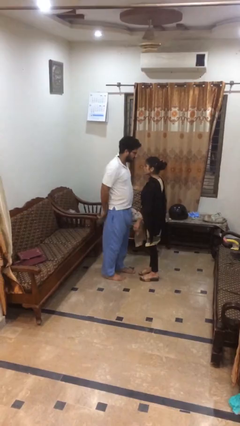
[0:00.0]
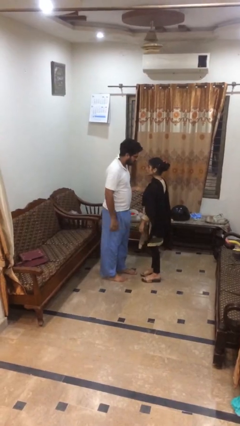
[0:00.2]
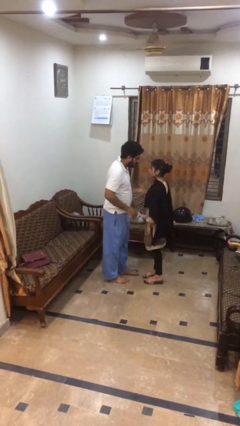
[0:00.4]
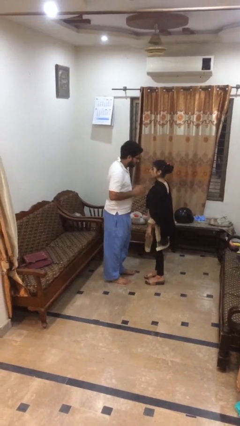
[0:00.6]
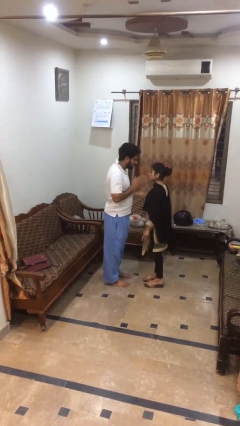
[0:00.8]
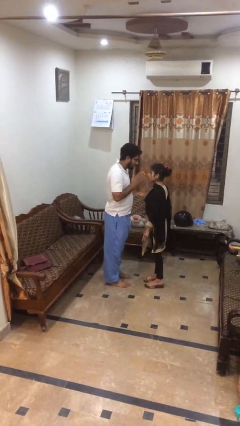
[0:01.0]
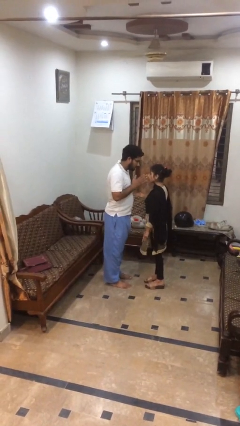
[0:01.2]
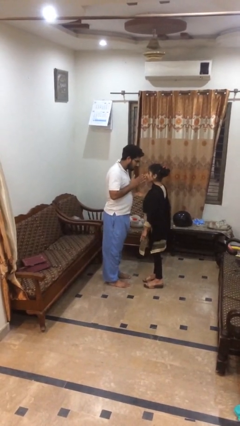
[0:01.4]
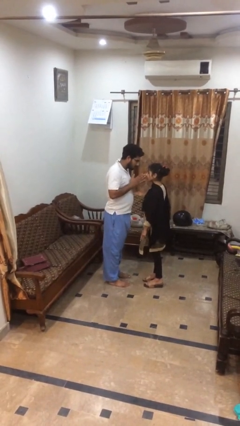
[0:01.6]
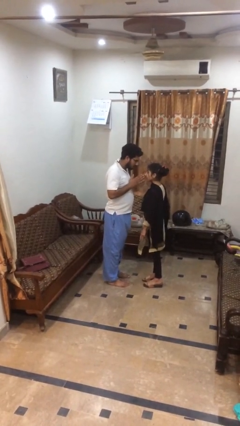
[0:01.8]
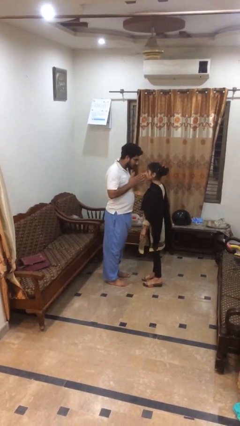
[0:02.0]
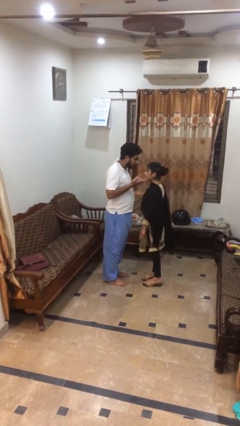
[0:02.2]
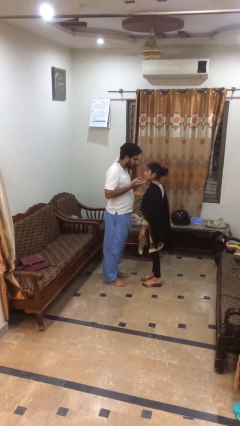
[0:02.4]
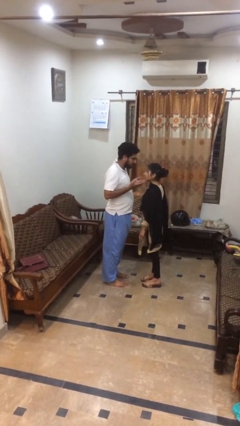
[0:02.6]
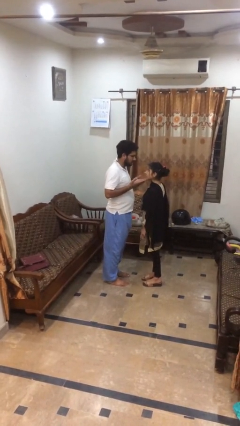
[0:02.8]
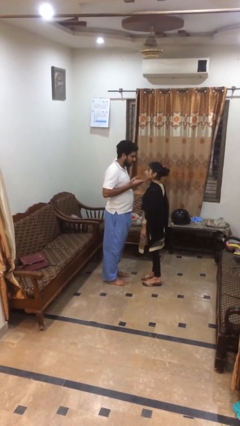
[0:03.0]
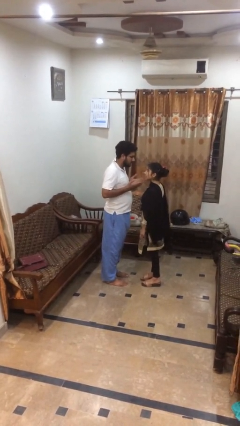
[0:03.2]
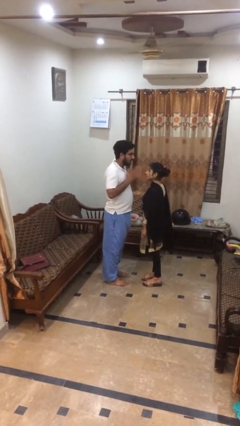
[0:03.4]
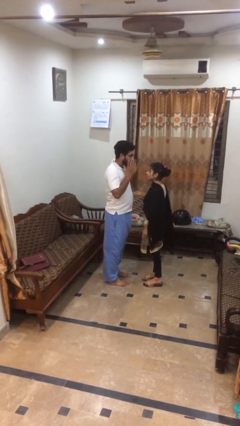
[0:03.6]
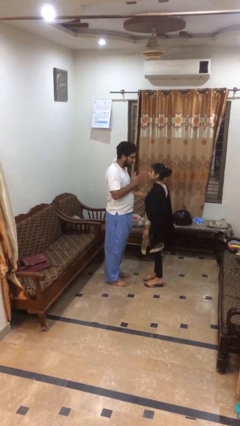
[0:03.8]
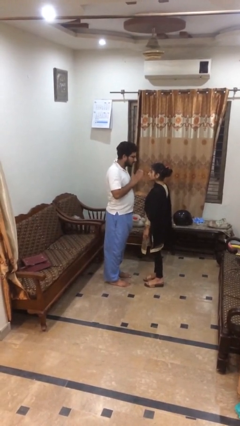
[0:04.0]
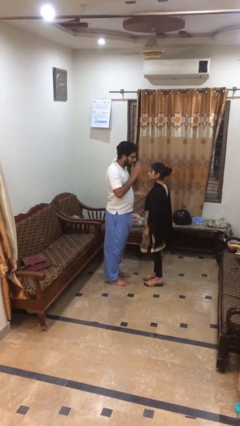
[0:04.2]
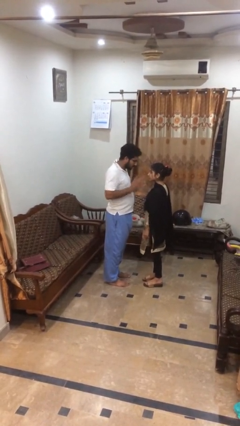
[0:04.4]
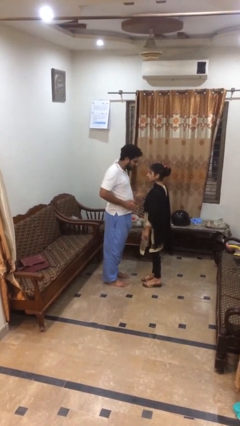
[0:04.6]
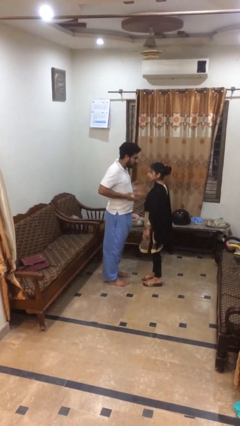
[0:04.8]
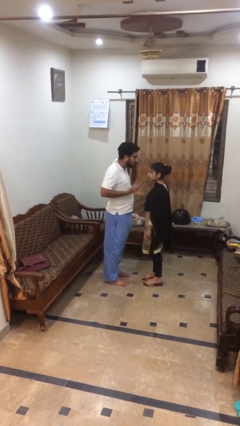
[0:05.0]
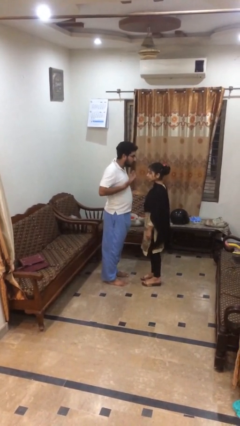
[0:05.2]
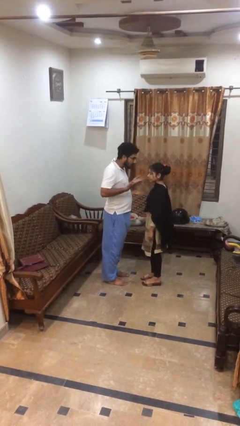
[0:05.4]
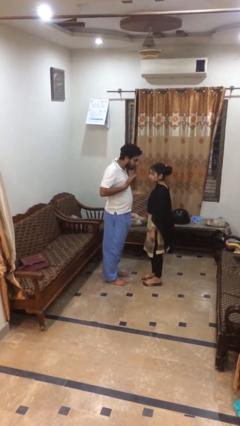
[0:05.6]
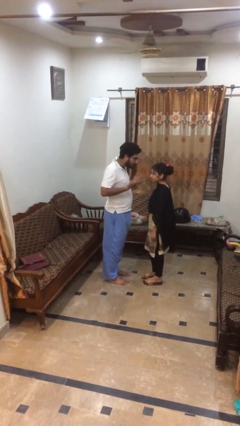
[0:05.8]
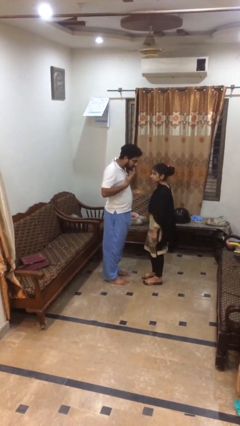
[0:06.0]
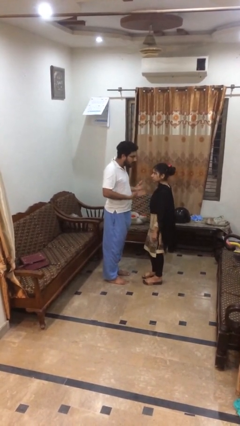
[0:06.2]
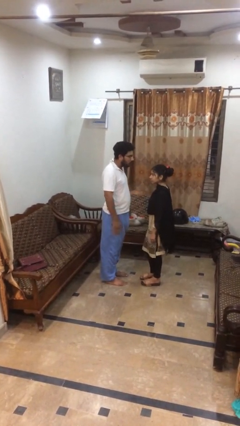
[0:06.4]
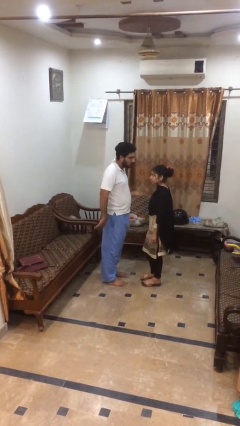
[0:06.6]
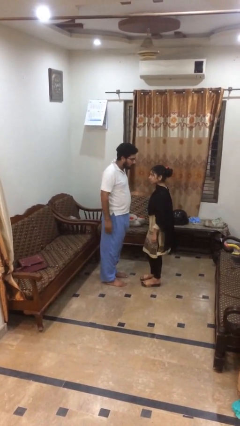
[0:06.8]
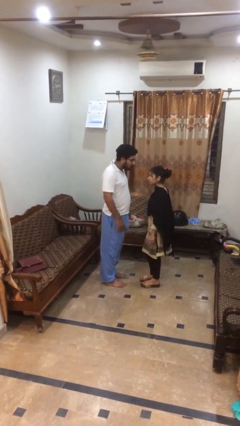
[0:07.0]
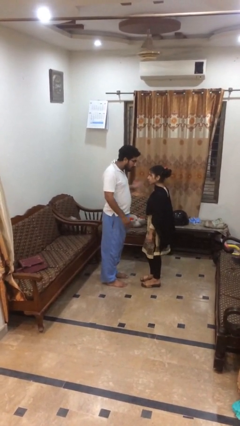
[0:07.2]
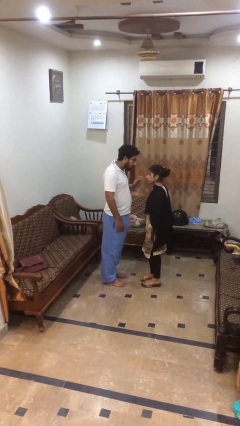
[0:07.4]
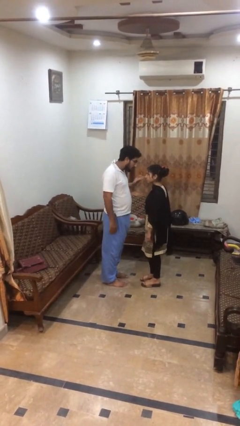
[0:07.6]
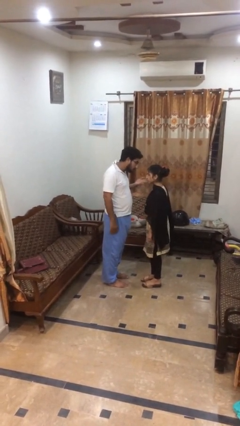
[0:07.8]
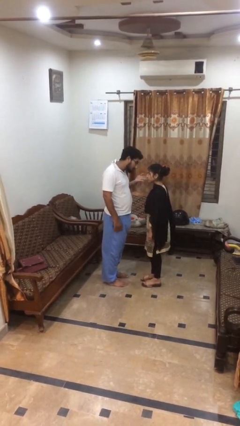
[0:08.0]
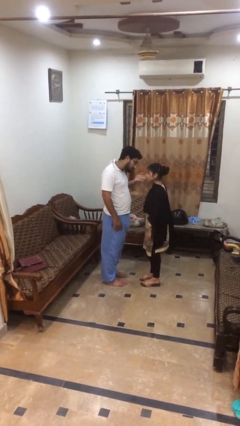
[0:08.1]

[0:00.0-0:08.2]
person talks to person

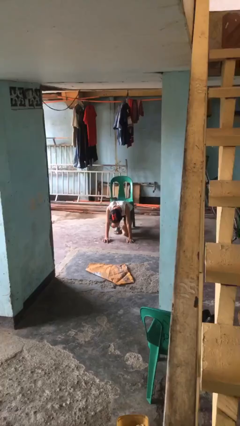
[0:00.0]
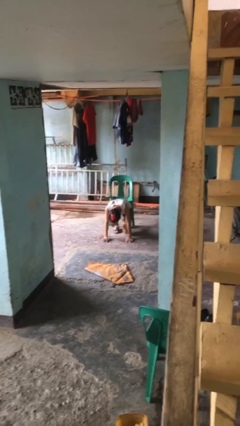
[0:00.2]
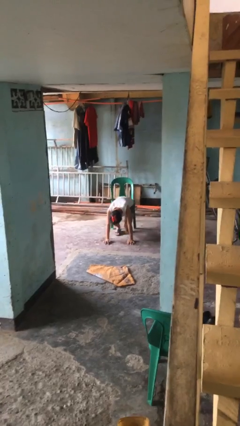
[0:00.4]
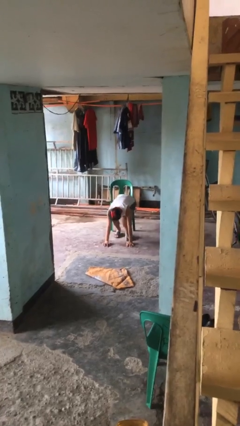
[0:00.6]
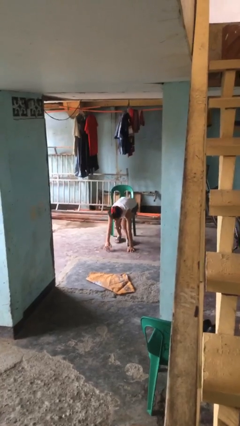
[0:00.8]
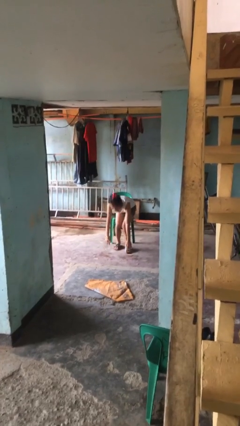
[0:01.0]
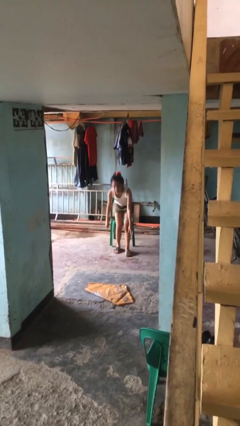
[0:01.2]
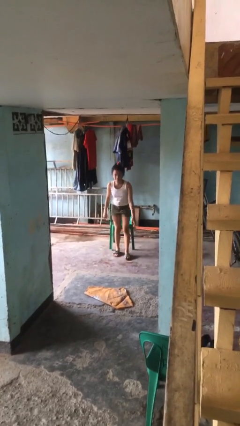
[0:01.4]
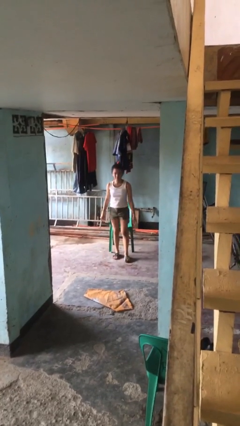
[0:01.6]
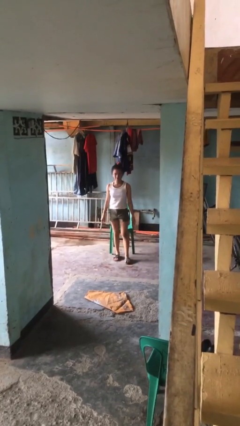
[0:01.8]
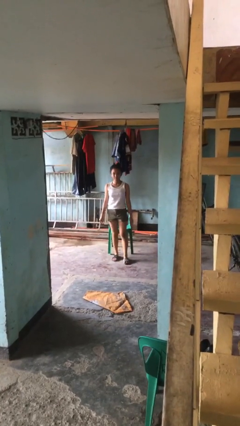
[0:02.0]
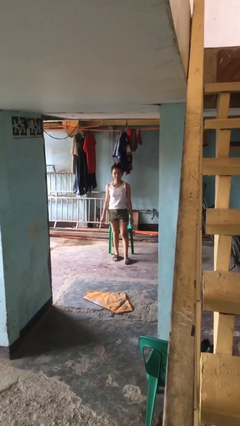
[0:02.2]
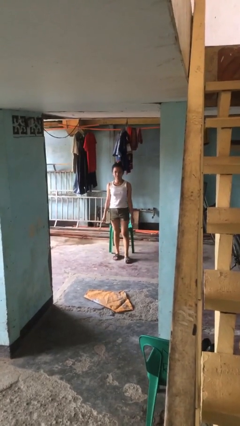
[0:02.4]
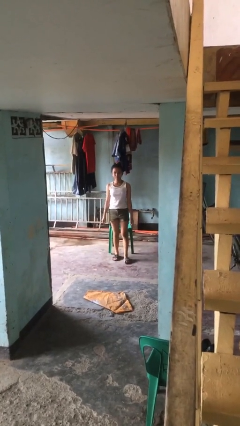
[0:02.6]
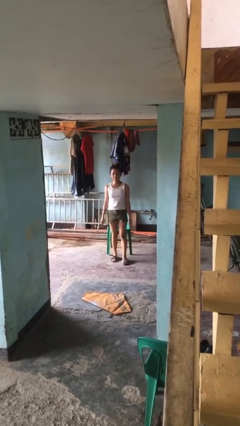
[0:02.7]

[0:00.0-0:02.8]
person stands up from floor

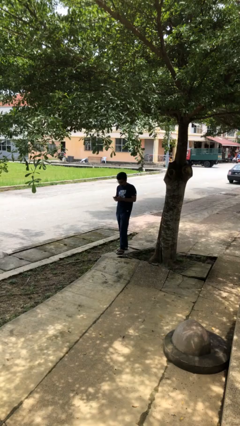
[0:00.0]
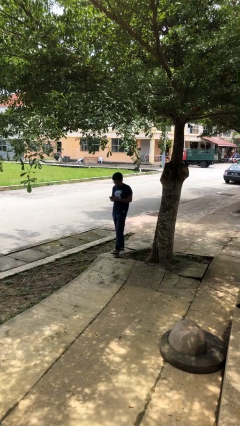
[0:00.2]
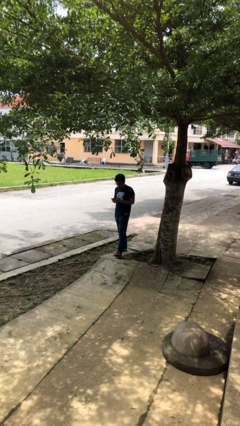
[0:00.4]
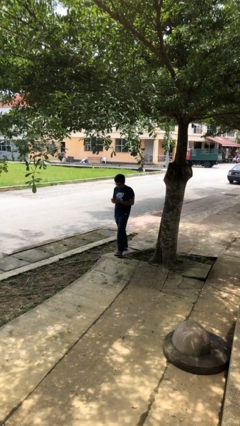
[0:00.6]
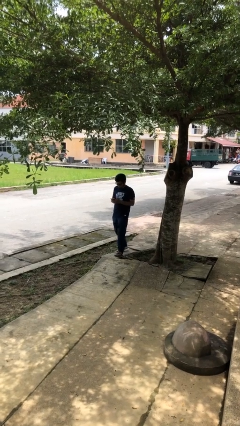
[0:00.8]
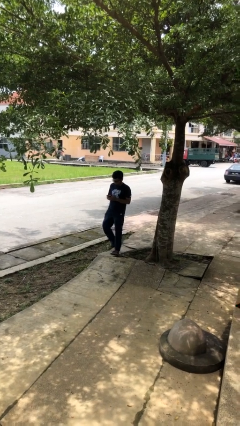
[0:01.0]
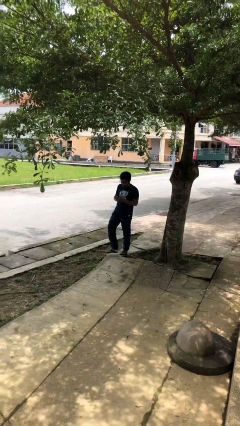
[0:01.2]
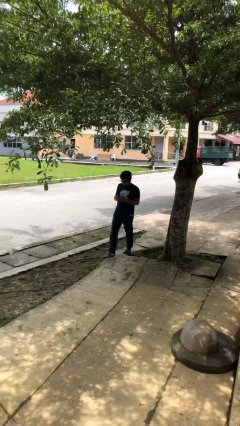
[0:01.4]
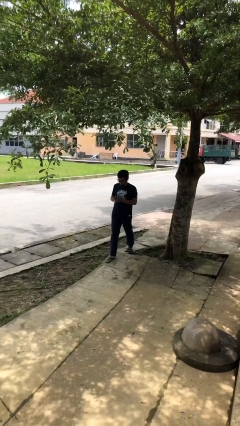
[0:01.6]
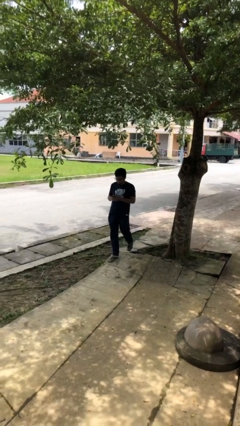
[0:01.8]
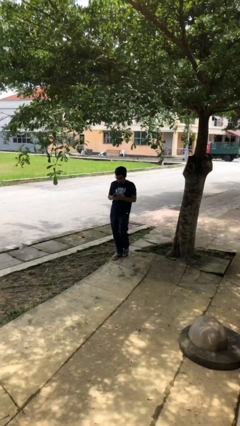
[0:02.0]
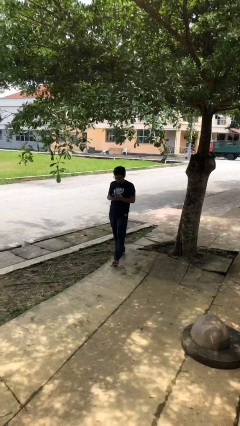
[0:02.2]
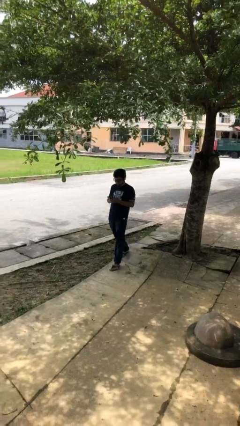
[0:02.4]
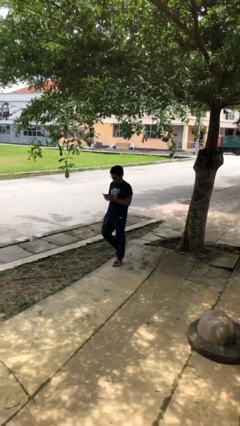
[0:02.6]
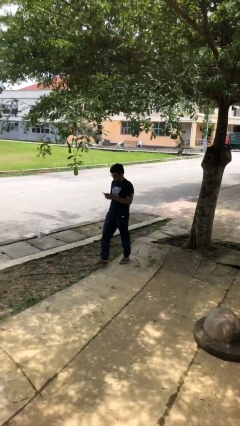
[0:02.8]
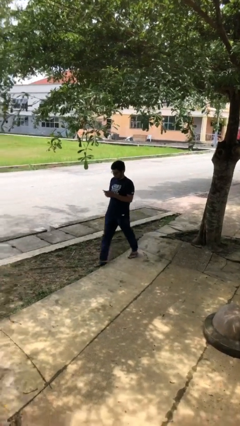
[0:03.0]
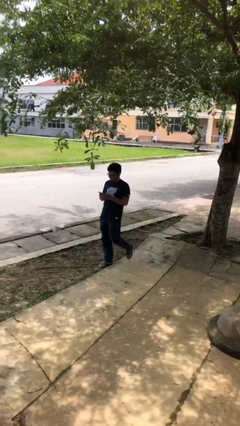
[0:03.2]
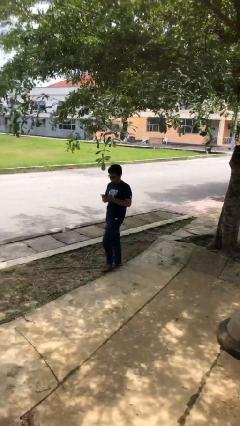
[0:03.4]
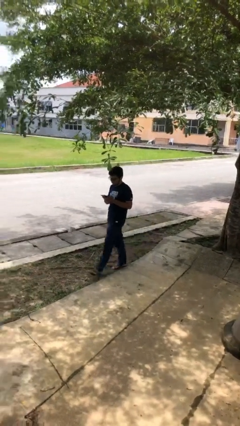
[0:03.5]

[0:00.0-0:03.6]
person texts on phone

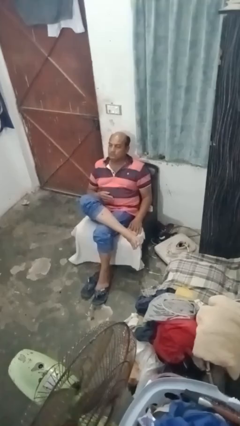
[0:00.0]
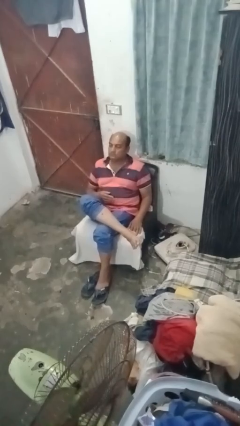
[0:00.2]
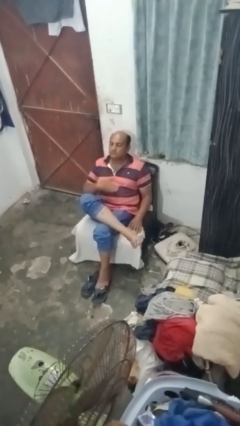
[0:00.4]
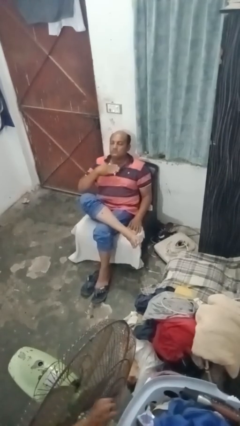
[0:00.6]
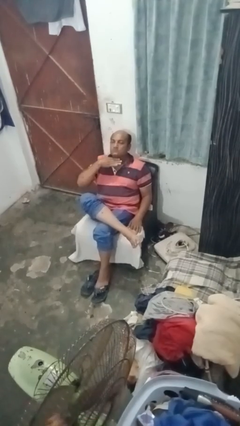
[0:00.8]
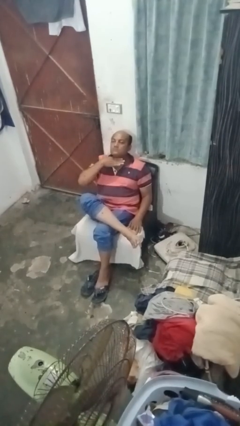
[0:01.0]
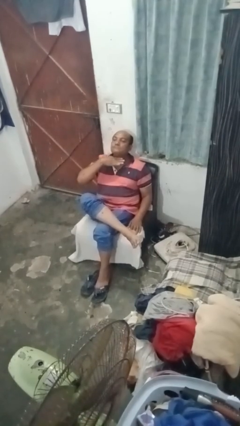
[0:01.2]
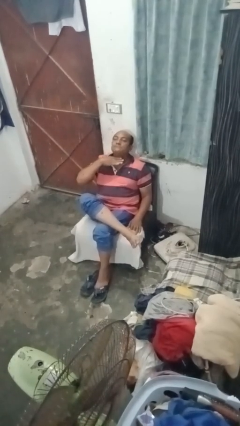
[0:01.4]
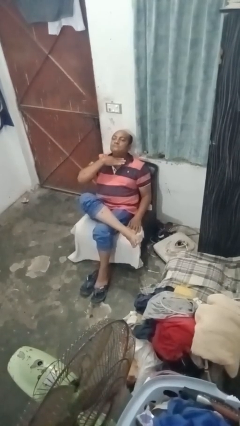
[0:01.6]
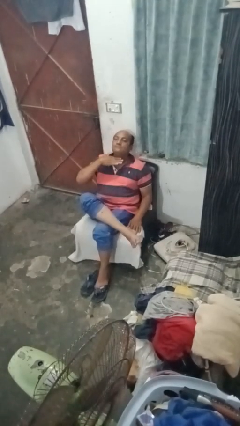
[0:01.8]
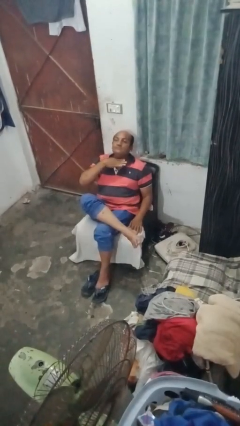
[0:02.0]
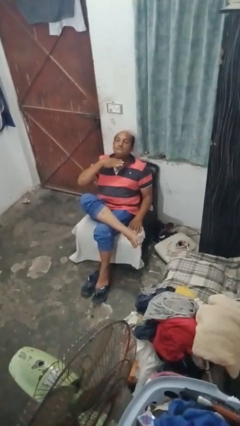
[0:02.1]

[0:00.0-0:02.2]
person gestures cut

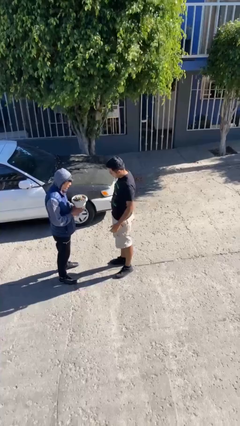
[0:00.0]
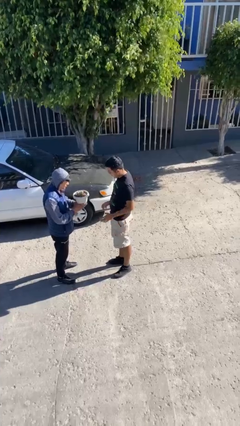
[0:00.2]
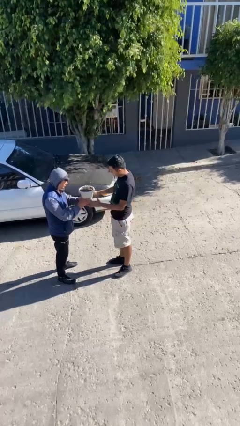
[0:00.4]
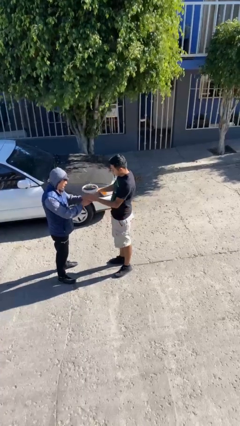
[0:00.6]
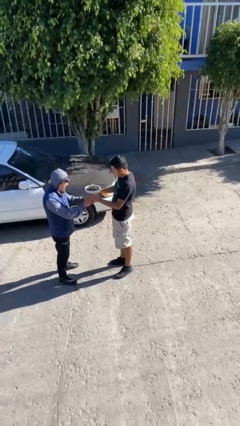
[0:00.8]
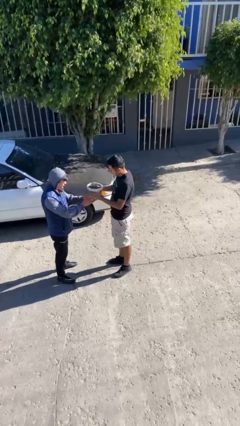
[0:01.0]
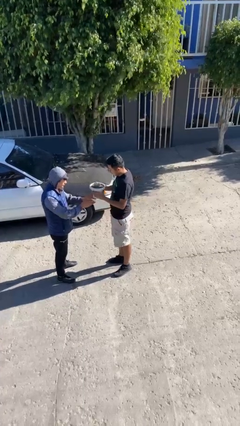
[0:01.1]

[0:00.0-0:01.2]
person transfers object to person
